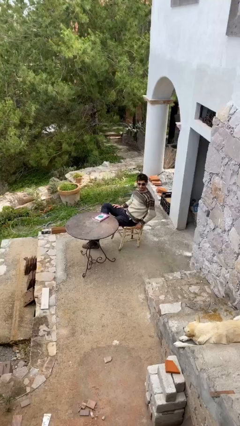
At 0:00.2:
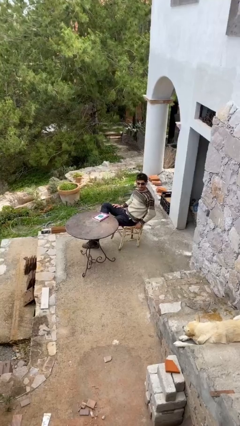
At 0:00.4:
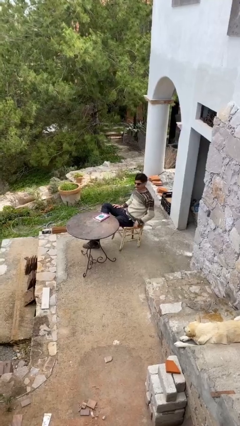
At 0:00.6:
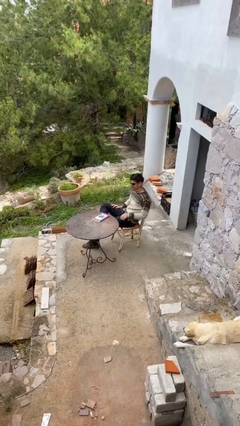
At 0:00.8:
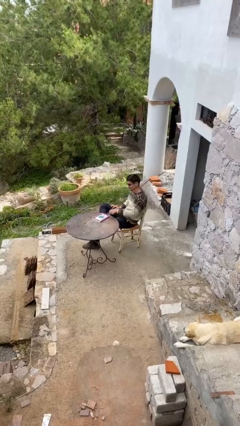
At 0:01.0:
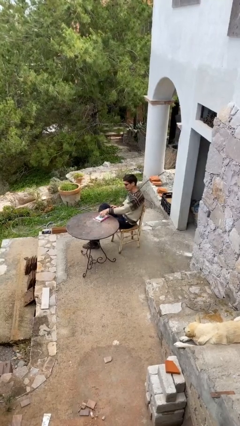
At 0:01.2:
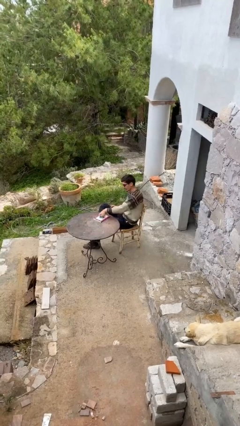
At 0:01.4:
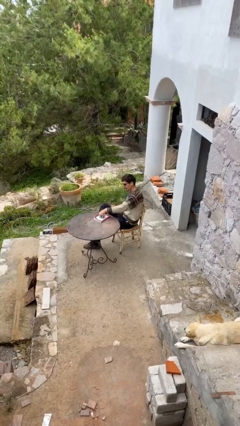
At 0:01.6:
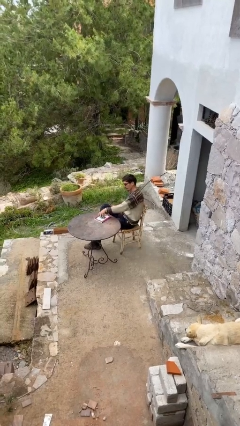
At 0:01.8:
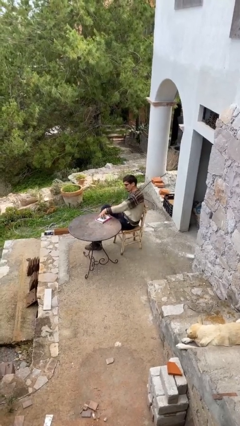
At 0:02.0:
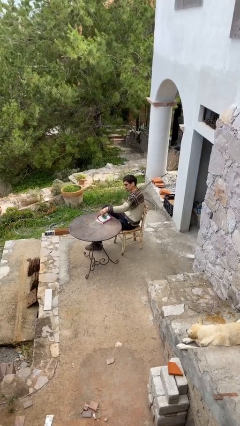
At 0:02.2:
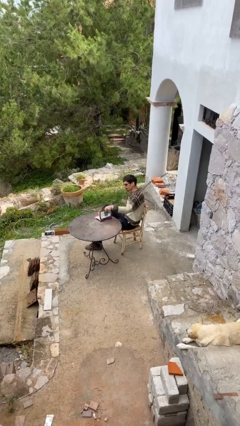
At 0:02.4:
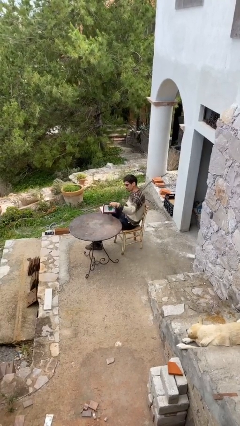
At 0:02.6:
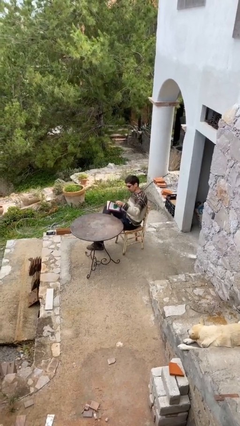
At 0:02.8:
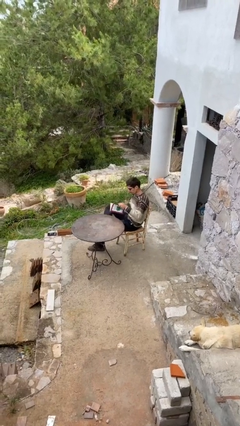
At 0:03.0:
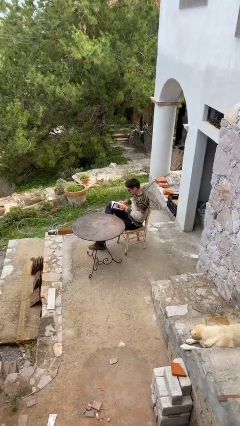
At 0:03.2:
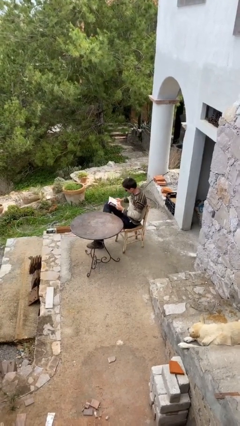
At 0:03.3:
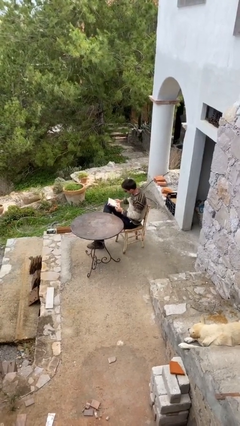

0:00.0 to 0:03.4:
person picks up object from table

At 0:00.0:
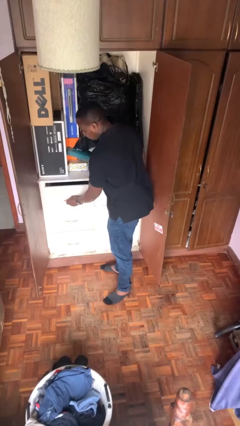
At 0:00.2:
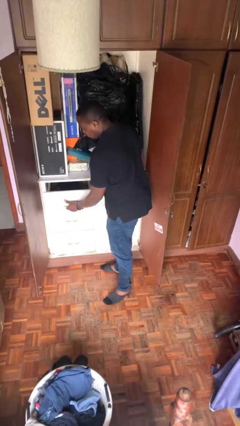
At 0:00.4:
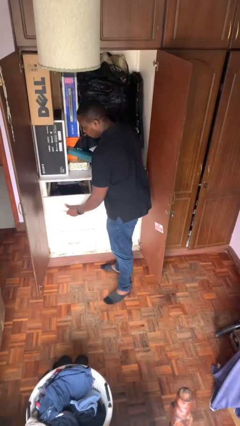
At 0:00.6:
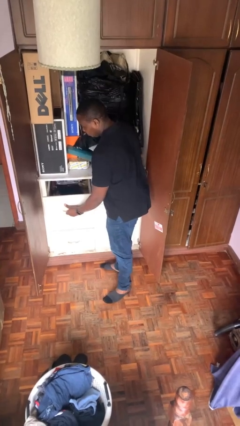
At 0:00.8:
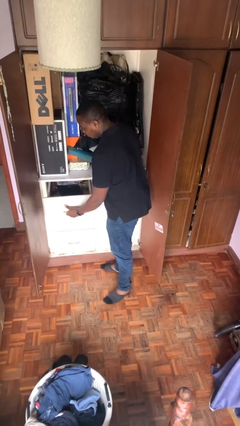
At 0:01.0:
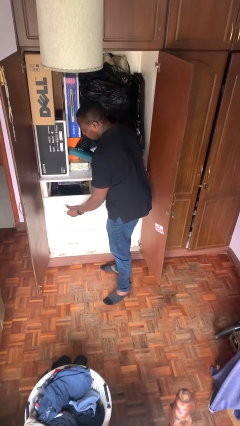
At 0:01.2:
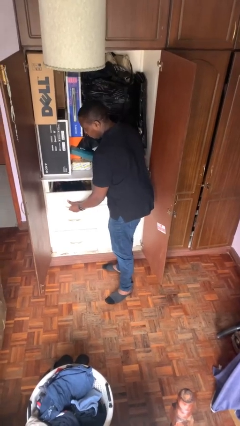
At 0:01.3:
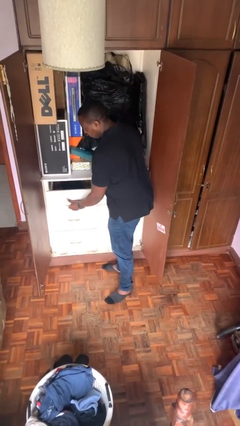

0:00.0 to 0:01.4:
person opens dresser drawer

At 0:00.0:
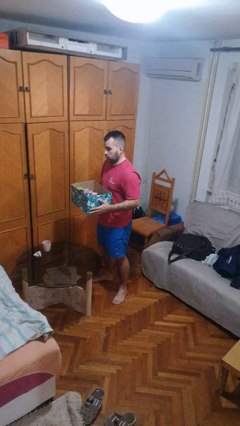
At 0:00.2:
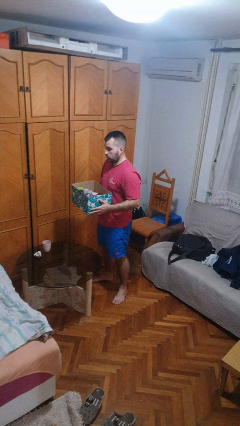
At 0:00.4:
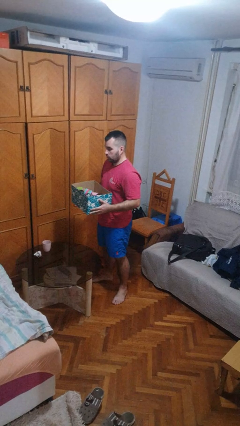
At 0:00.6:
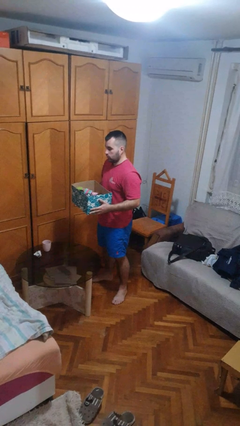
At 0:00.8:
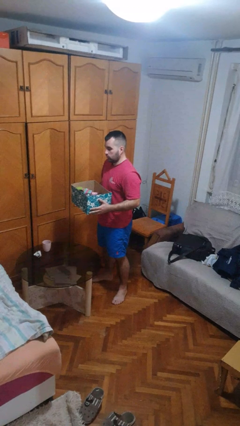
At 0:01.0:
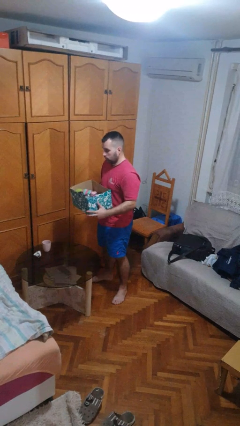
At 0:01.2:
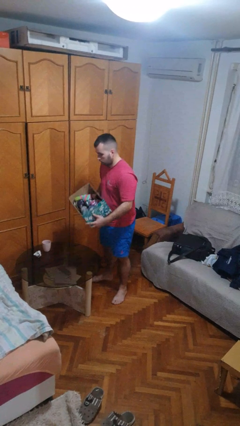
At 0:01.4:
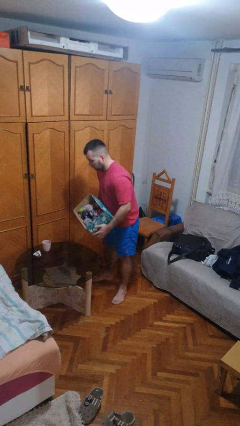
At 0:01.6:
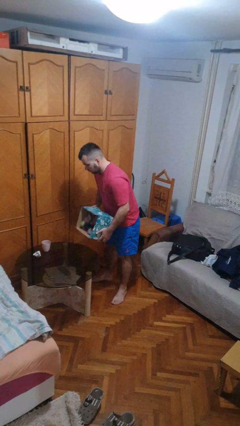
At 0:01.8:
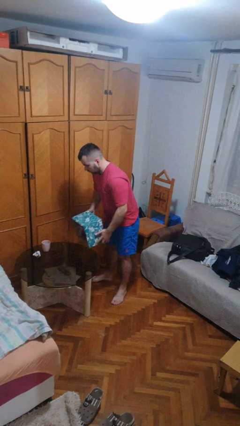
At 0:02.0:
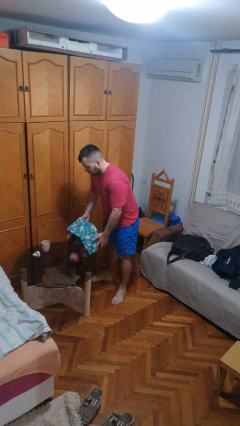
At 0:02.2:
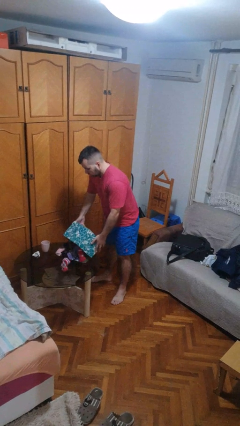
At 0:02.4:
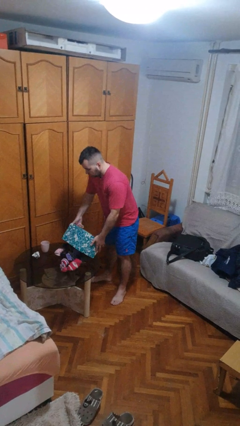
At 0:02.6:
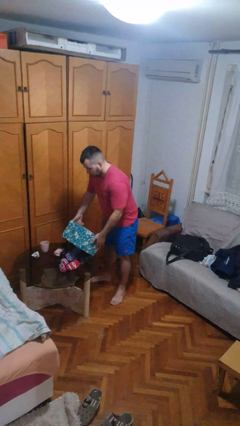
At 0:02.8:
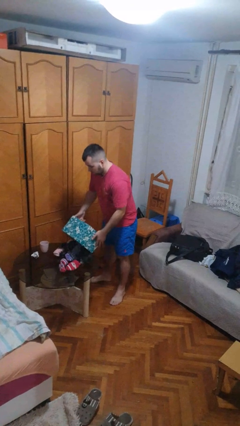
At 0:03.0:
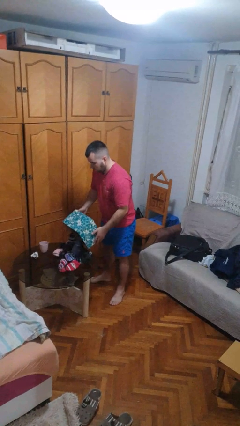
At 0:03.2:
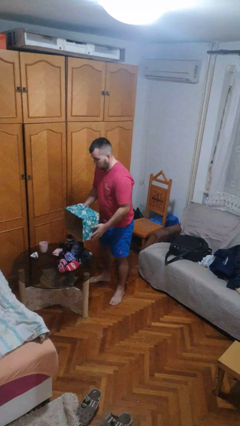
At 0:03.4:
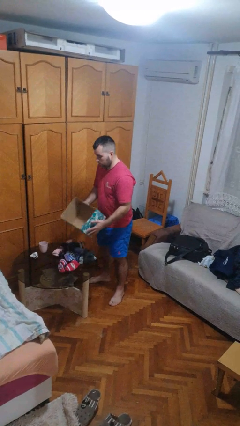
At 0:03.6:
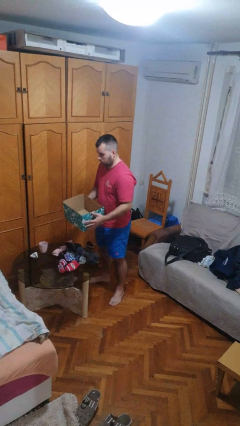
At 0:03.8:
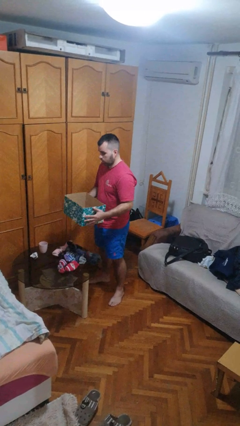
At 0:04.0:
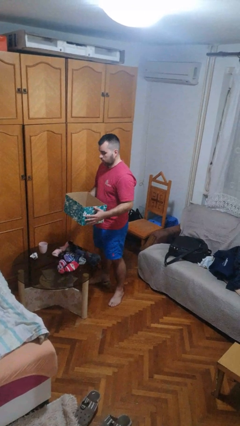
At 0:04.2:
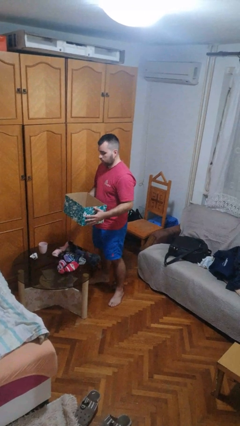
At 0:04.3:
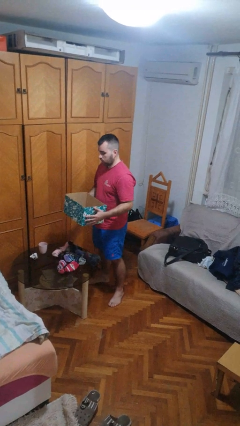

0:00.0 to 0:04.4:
person unloads box onto table

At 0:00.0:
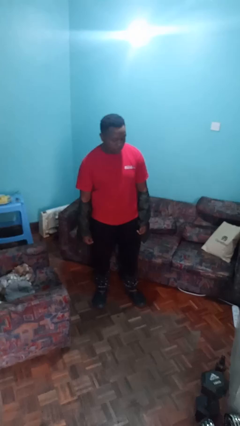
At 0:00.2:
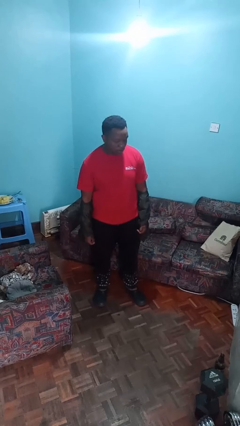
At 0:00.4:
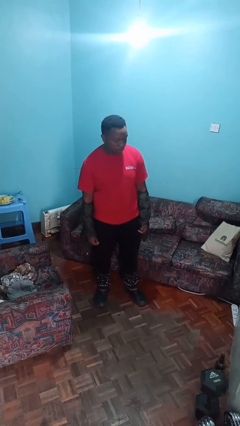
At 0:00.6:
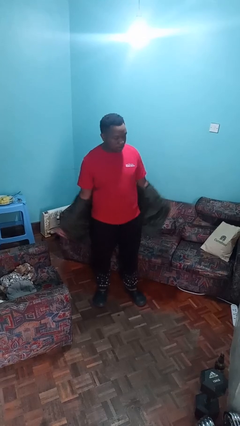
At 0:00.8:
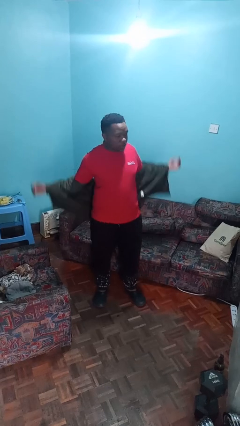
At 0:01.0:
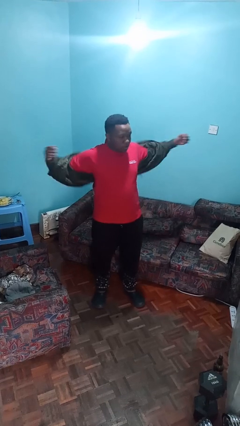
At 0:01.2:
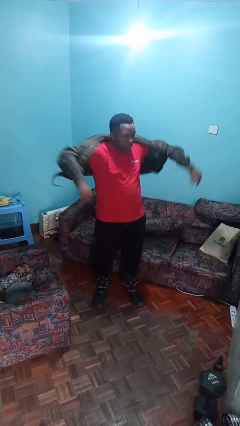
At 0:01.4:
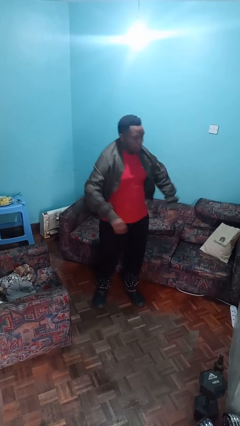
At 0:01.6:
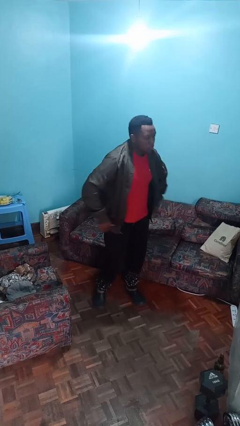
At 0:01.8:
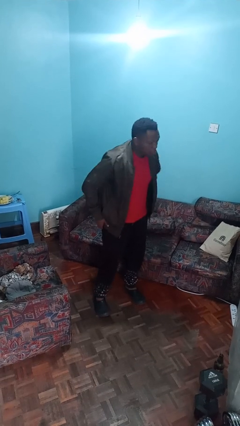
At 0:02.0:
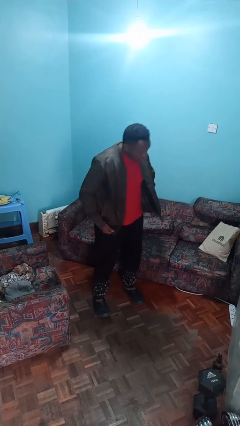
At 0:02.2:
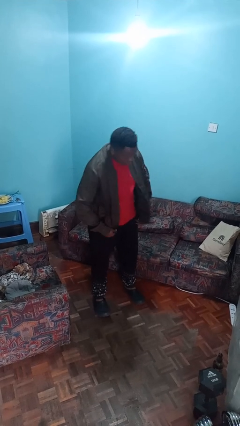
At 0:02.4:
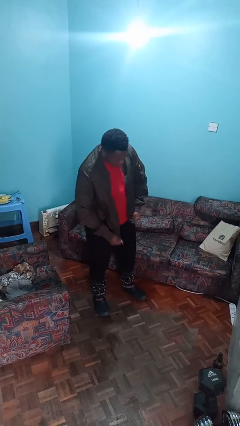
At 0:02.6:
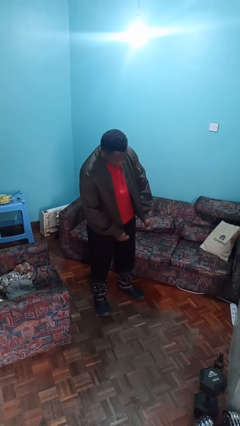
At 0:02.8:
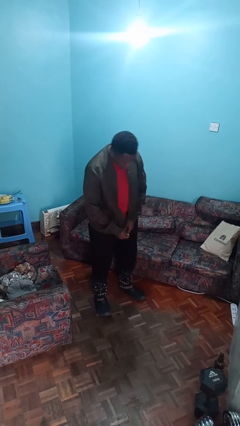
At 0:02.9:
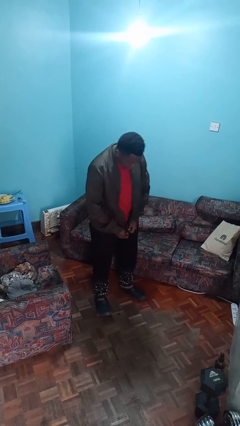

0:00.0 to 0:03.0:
person puts on jacket

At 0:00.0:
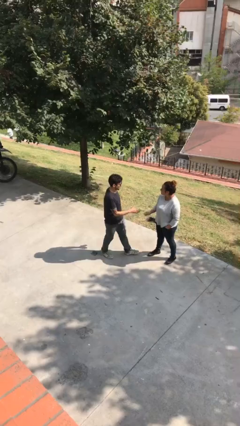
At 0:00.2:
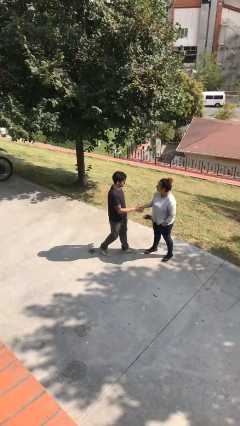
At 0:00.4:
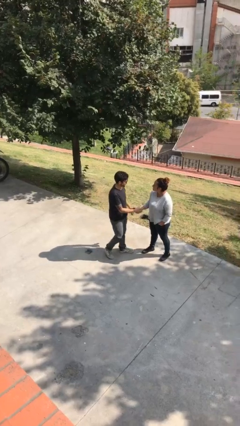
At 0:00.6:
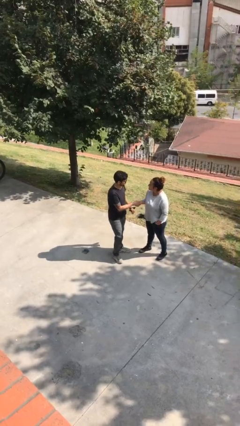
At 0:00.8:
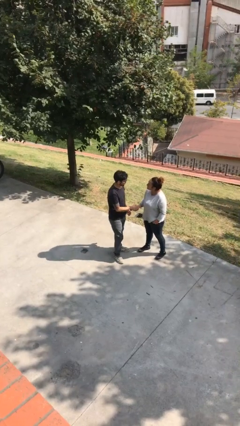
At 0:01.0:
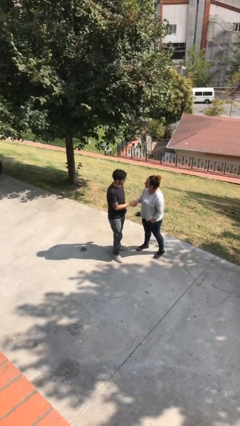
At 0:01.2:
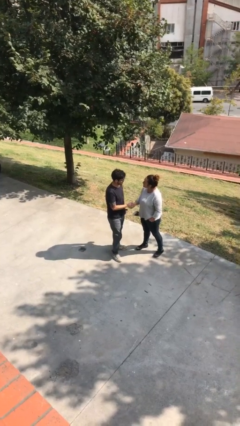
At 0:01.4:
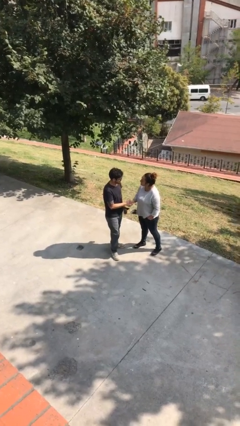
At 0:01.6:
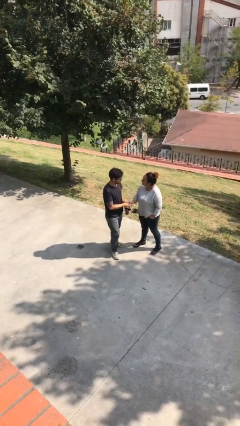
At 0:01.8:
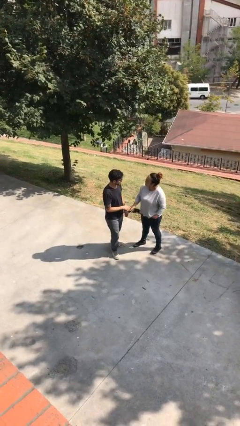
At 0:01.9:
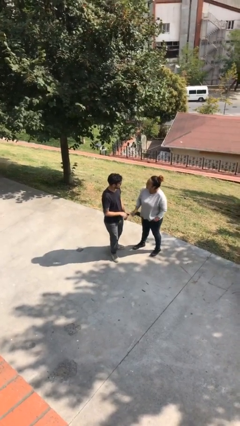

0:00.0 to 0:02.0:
person shakes hand

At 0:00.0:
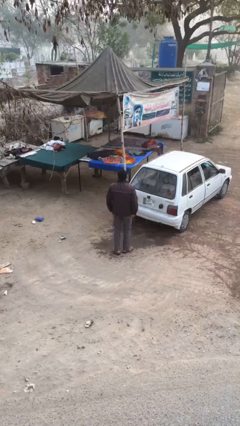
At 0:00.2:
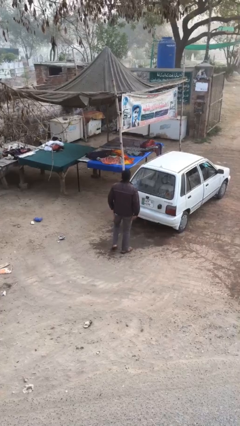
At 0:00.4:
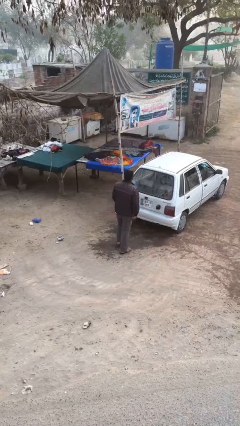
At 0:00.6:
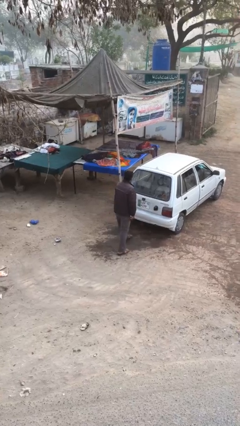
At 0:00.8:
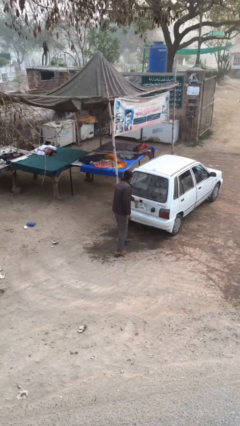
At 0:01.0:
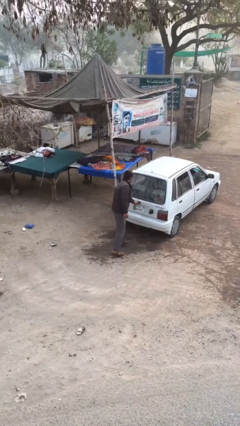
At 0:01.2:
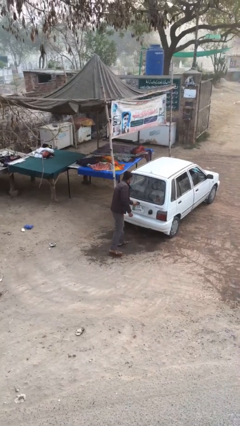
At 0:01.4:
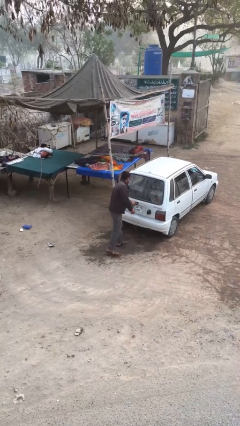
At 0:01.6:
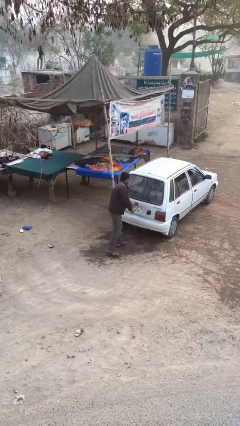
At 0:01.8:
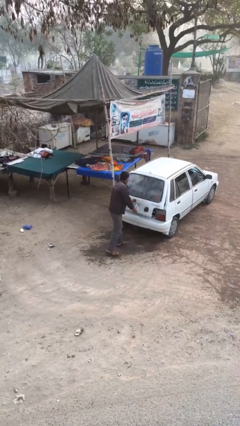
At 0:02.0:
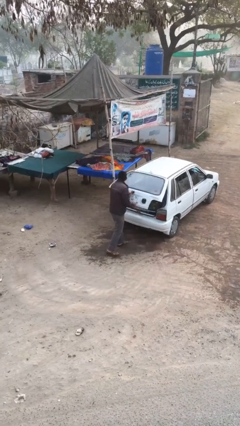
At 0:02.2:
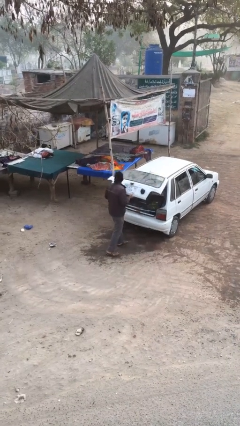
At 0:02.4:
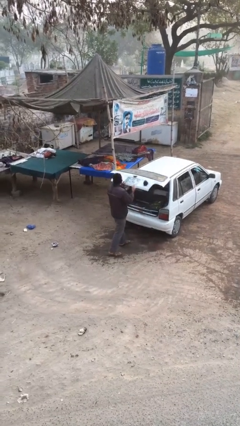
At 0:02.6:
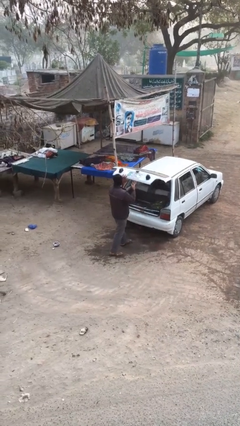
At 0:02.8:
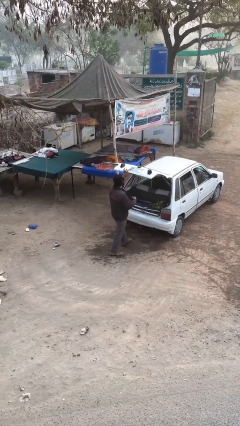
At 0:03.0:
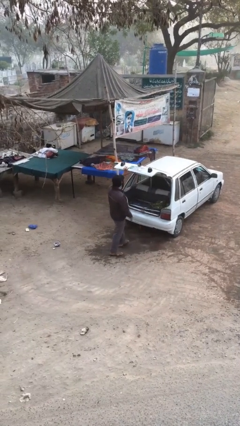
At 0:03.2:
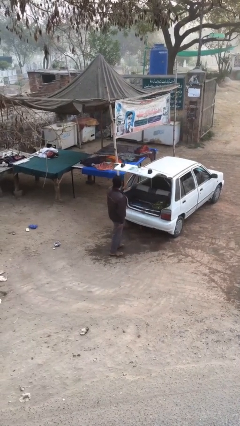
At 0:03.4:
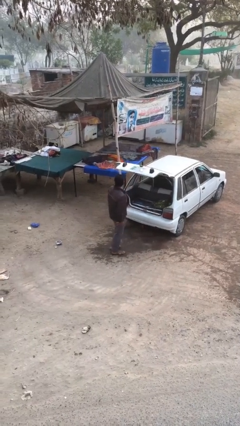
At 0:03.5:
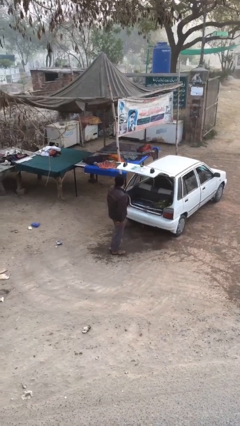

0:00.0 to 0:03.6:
person opens car trunk
